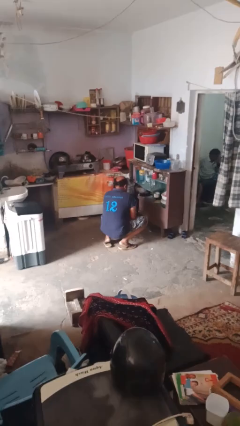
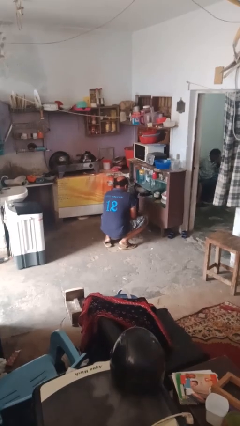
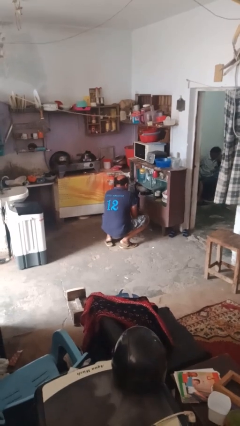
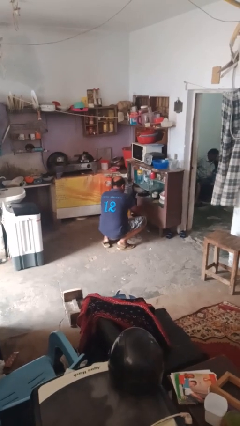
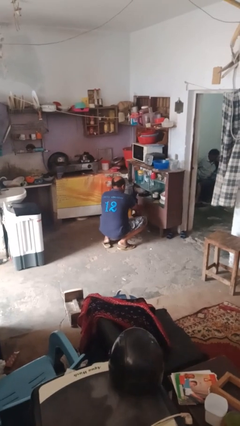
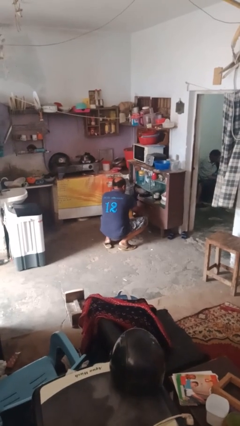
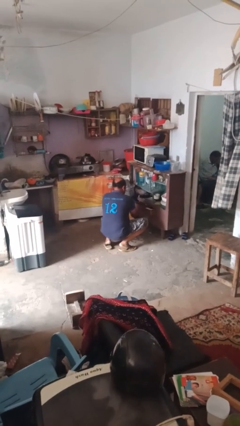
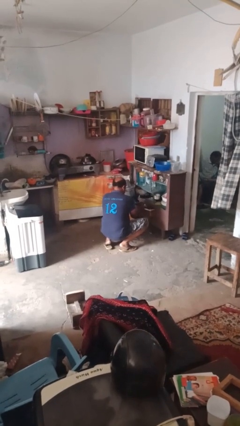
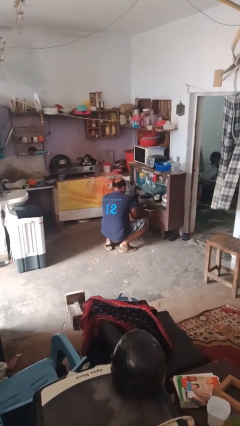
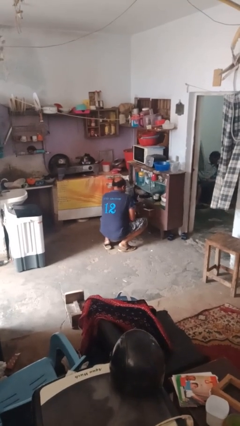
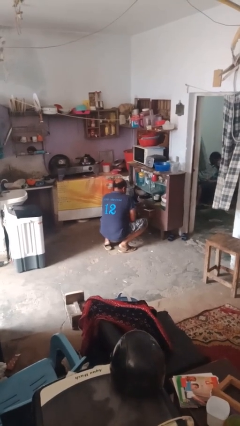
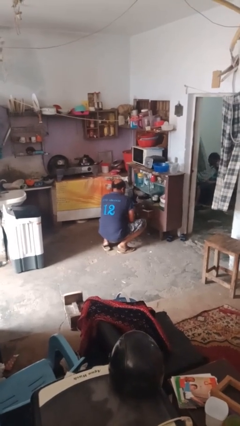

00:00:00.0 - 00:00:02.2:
person opens kitchen drawer

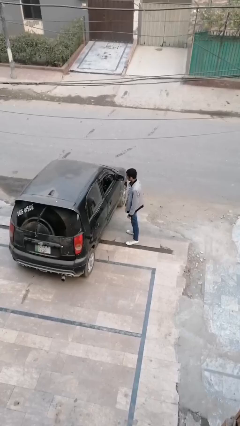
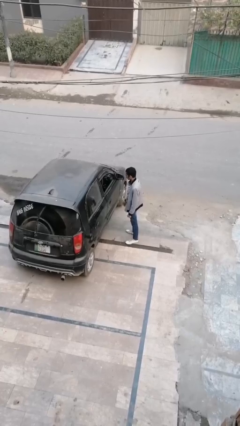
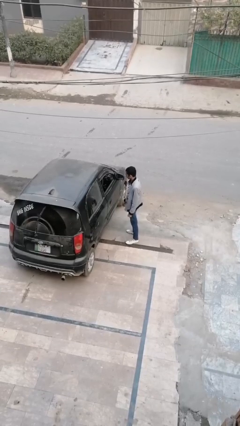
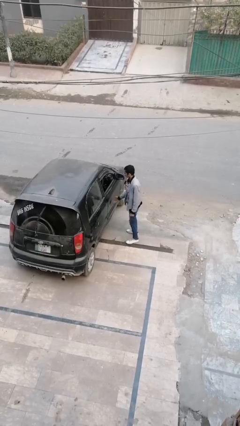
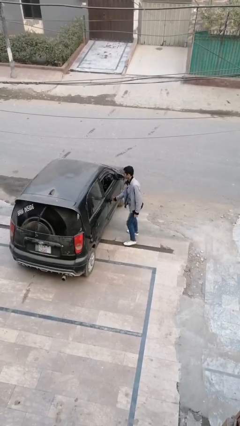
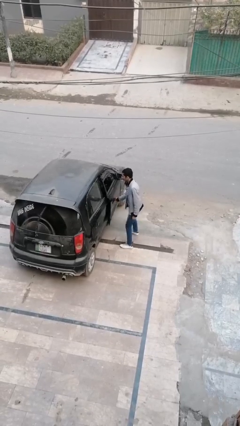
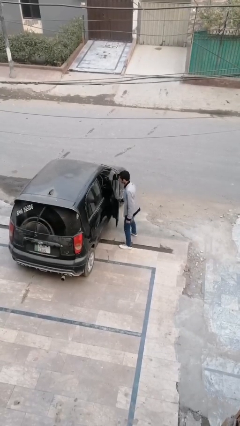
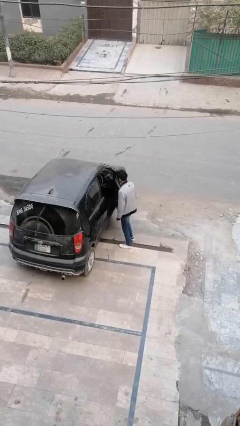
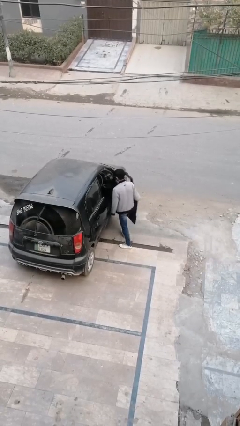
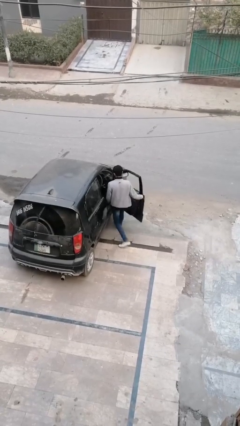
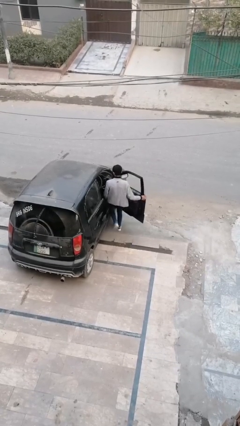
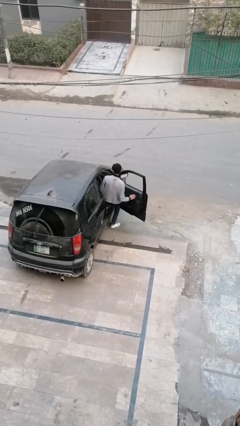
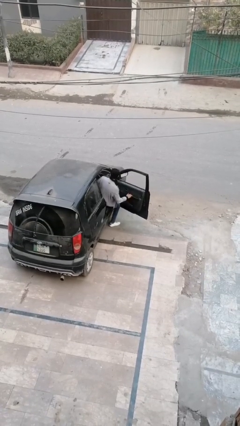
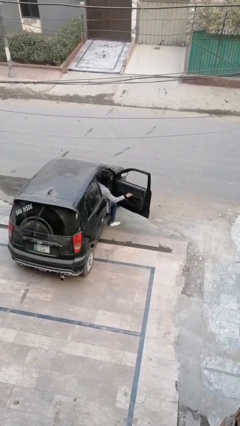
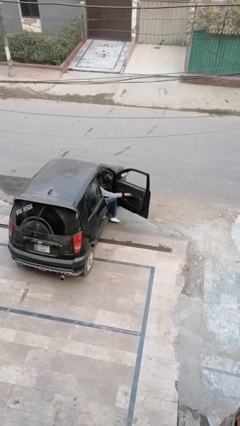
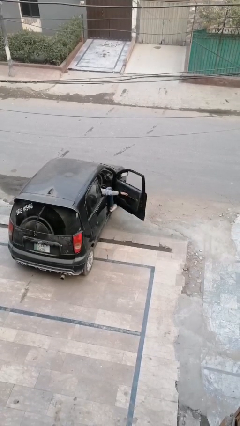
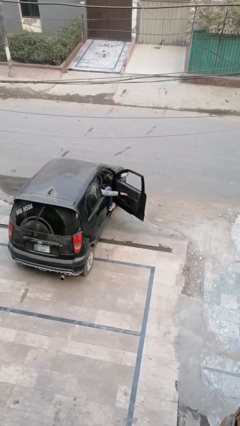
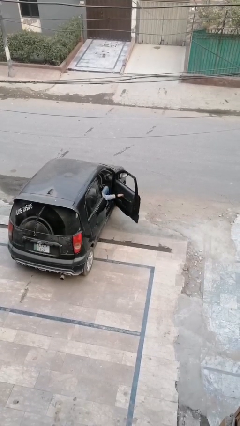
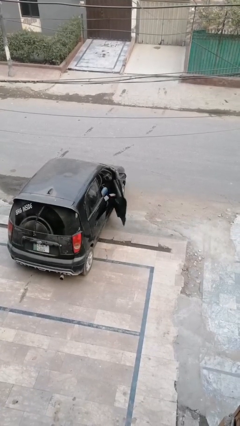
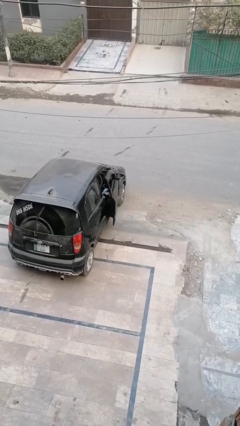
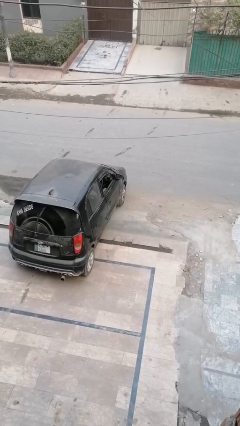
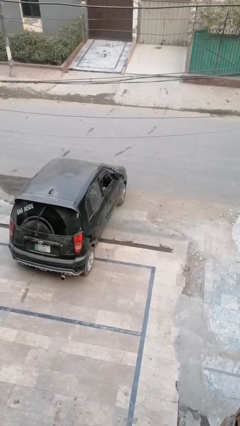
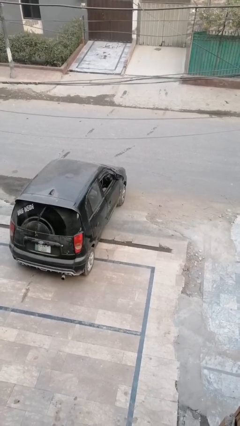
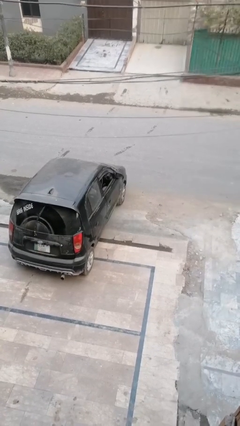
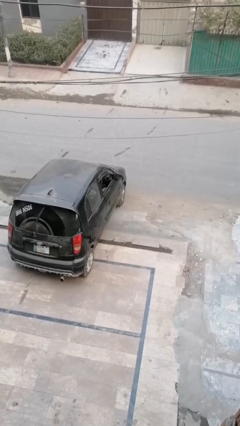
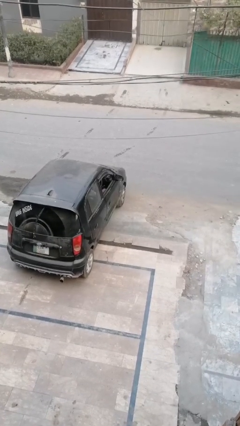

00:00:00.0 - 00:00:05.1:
person enters car

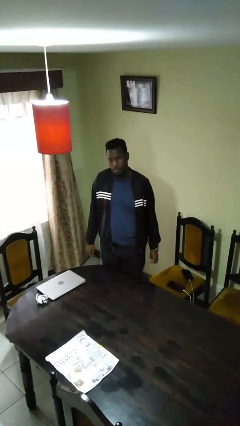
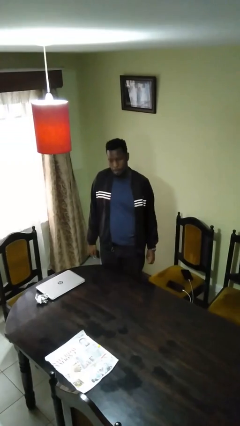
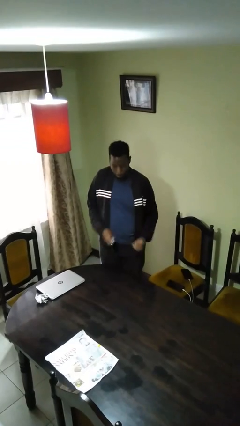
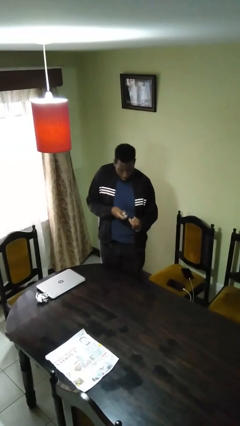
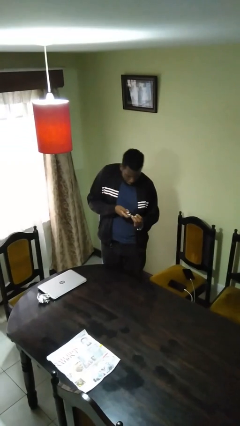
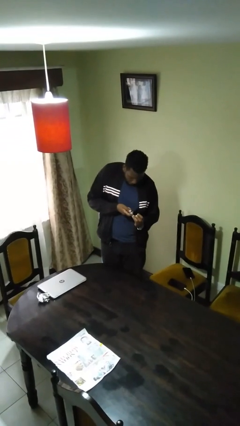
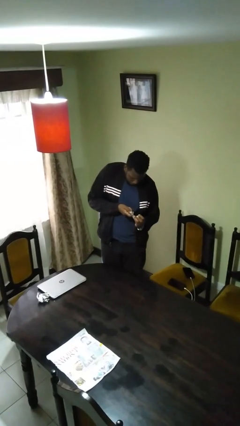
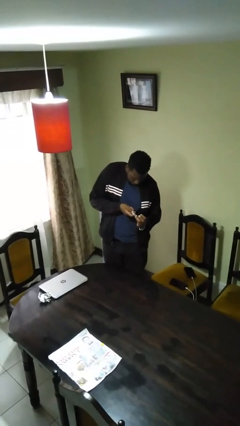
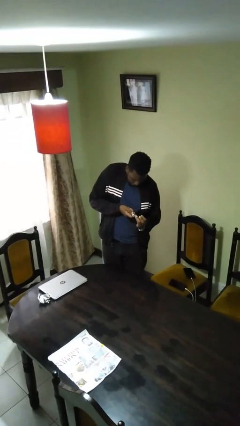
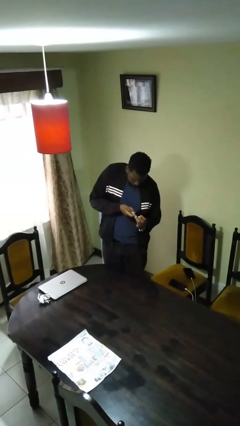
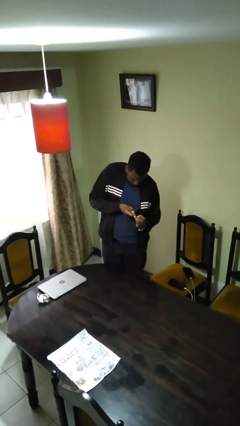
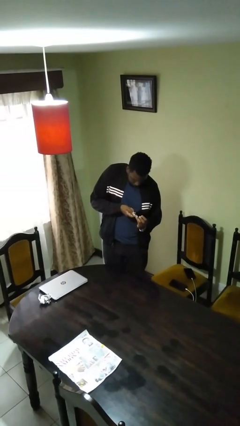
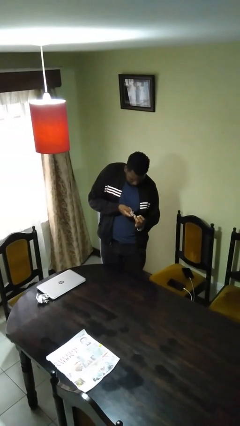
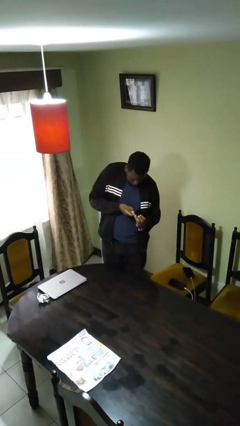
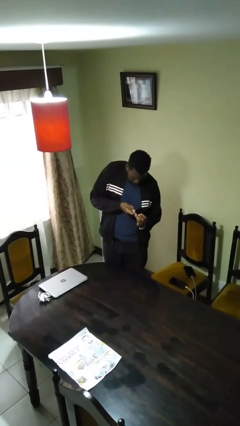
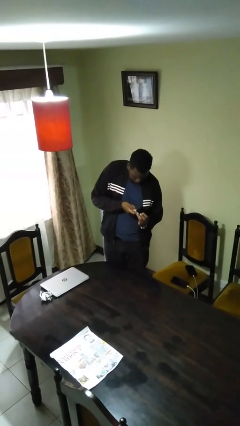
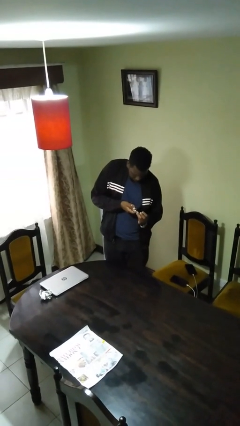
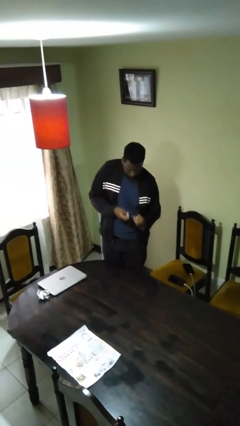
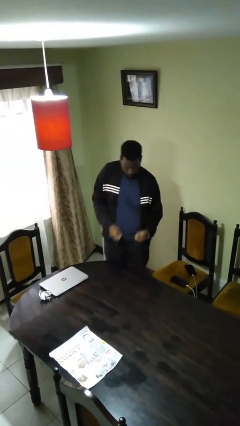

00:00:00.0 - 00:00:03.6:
person clips fingernails

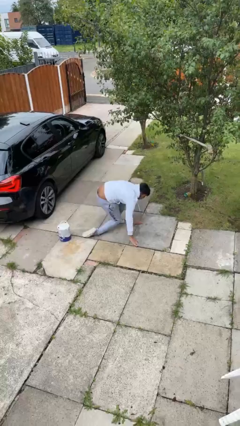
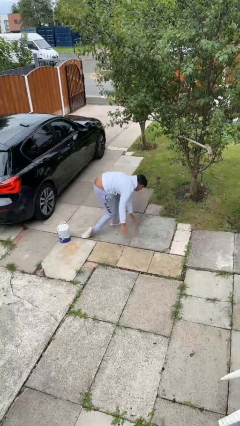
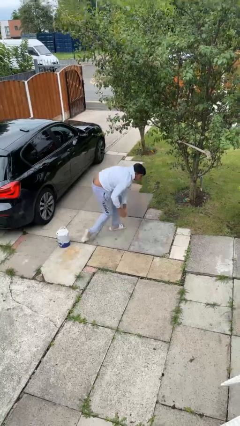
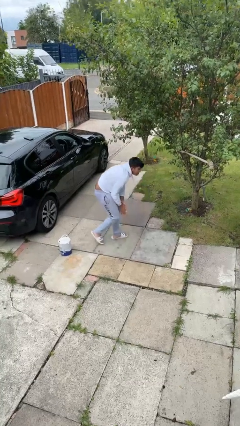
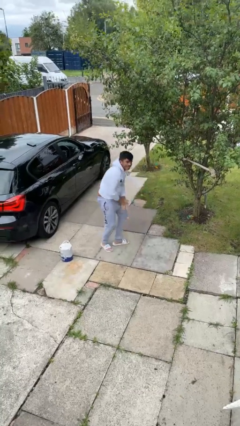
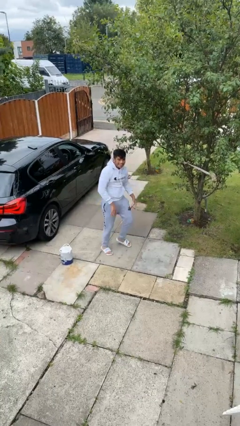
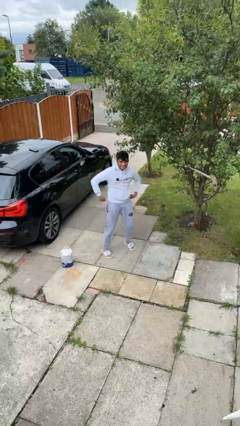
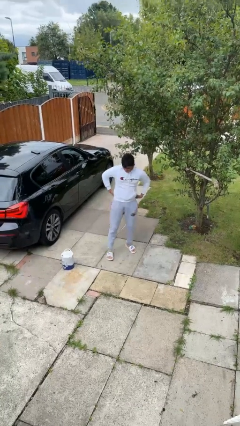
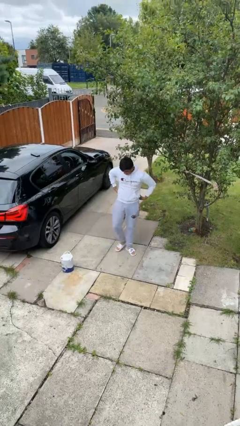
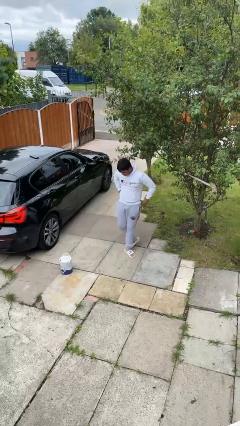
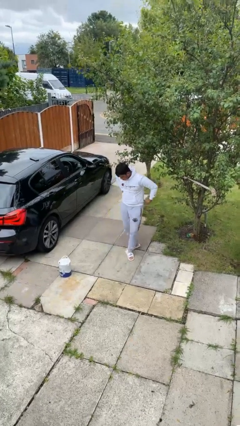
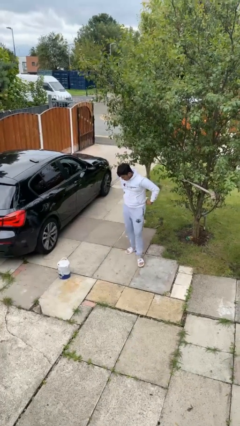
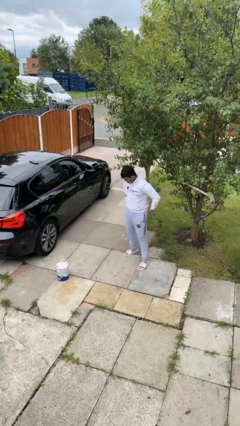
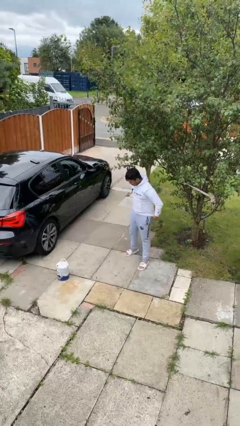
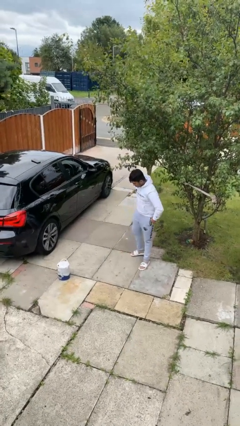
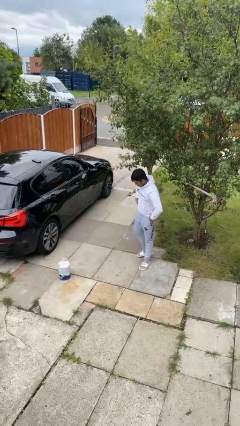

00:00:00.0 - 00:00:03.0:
person stands up from floor

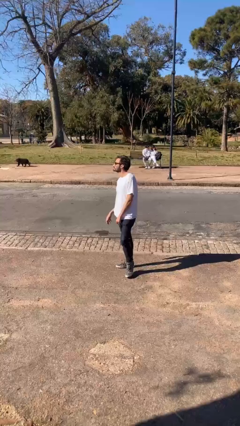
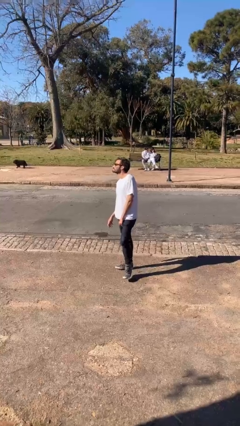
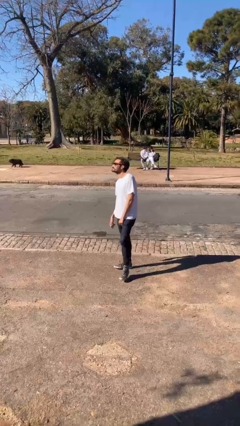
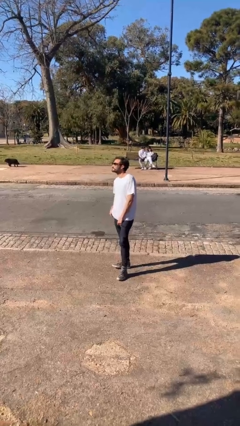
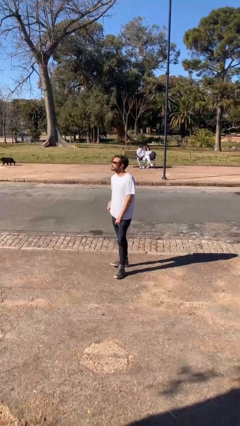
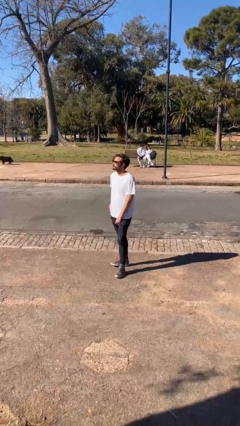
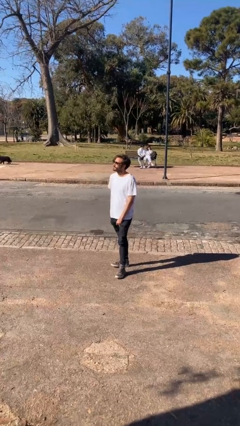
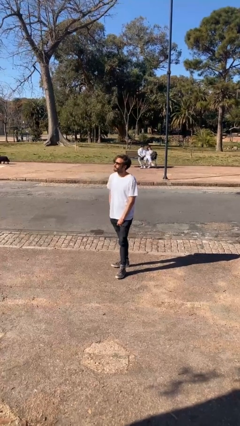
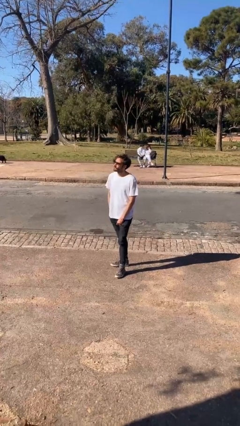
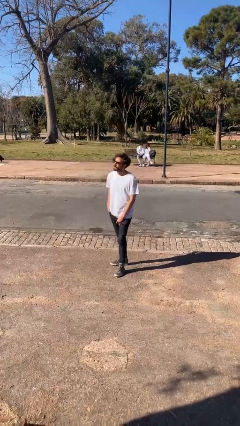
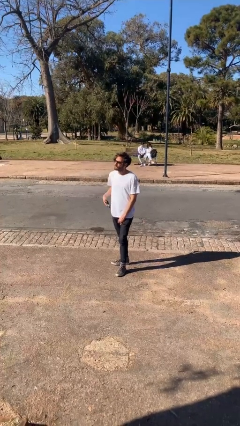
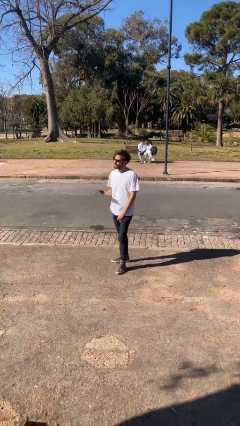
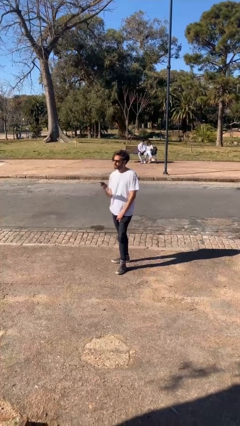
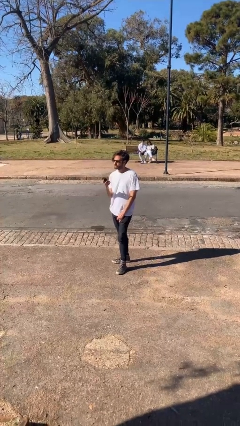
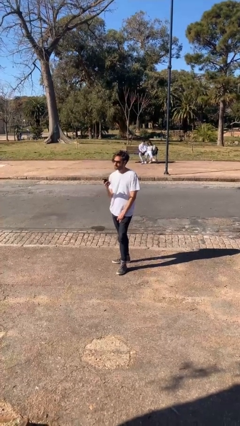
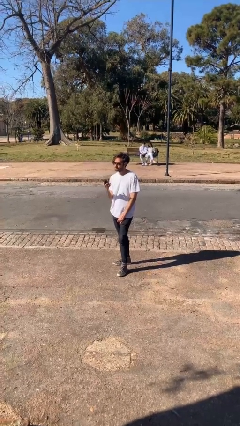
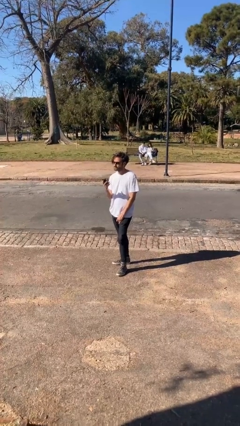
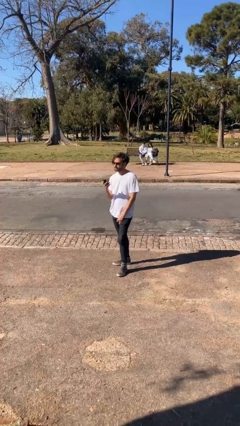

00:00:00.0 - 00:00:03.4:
person takes phone from pocket

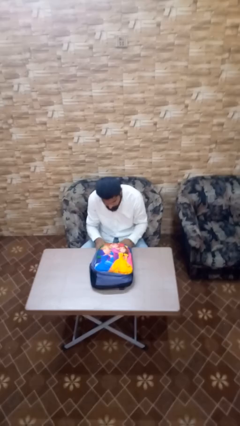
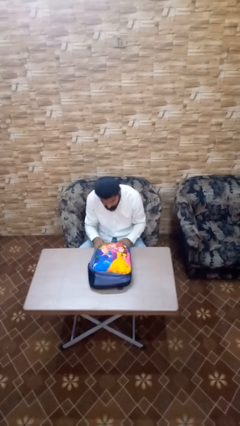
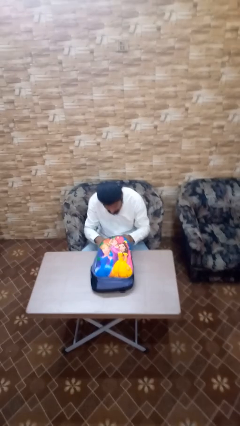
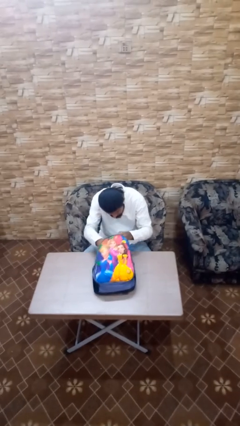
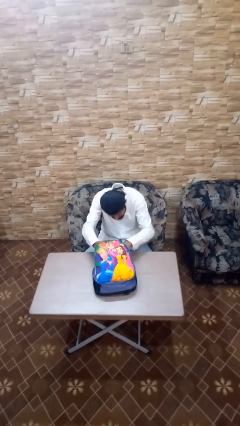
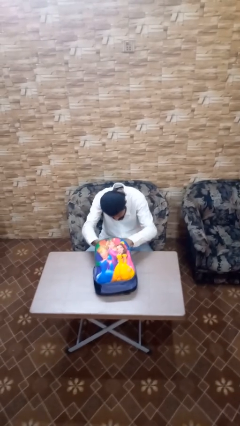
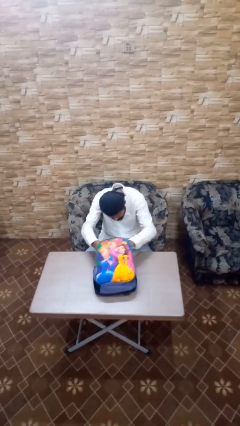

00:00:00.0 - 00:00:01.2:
person searches in backpack
